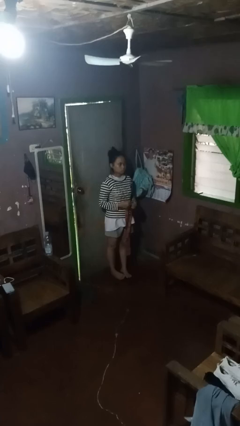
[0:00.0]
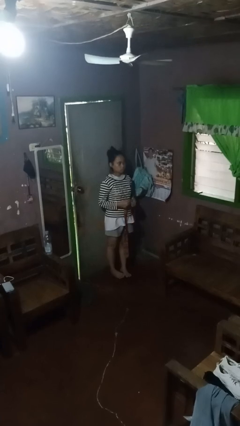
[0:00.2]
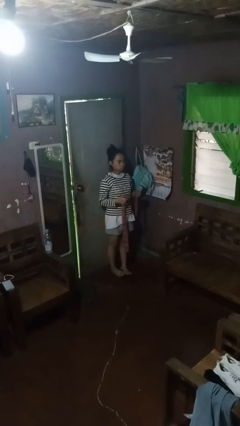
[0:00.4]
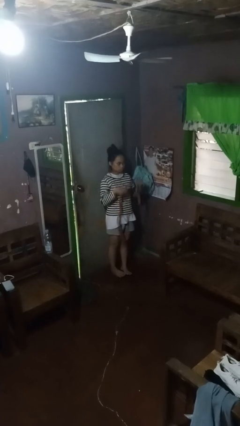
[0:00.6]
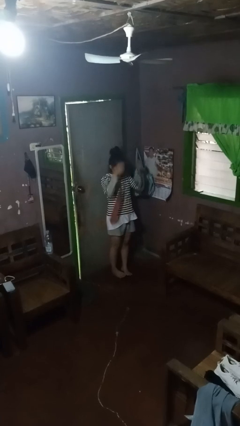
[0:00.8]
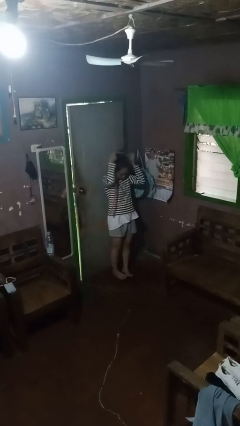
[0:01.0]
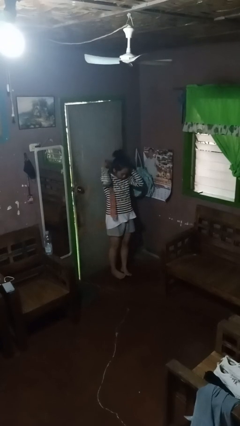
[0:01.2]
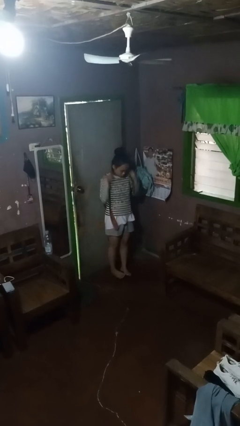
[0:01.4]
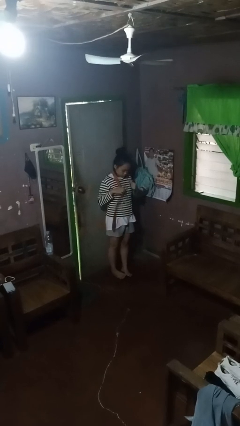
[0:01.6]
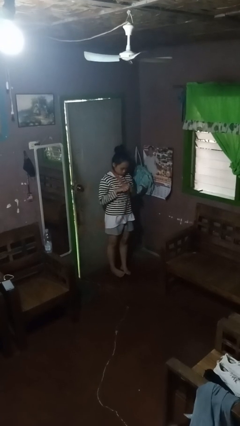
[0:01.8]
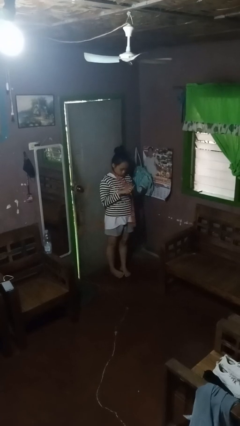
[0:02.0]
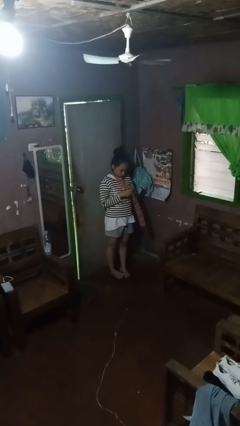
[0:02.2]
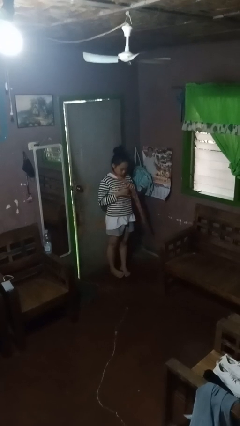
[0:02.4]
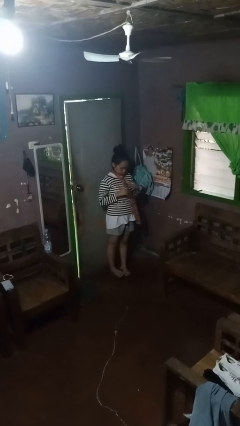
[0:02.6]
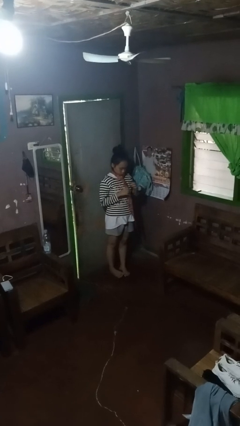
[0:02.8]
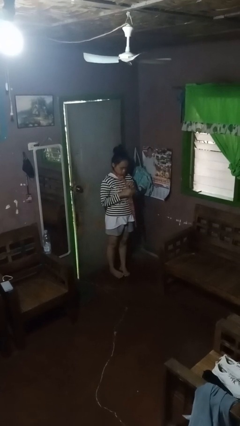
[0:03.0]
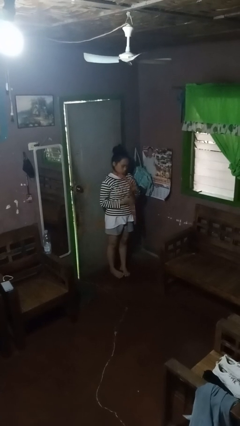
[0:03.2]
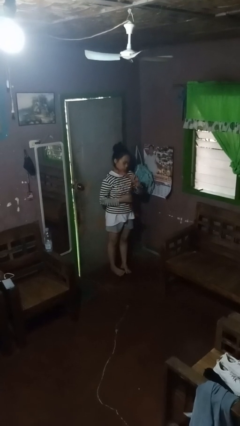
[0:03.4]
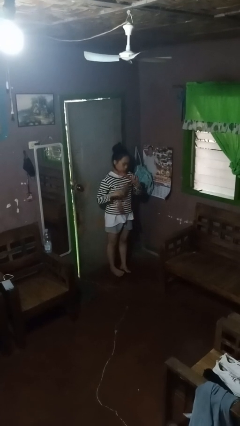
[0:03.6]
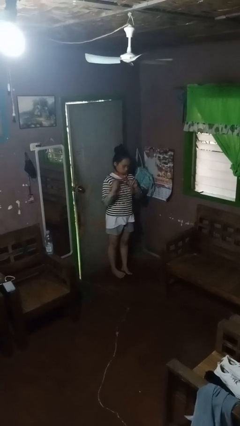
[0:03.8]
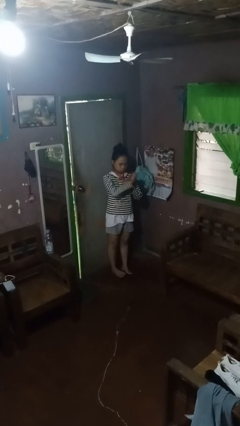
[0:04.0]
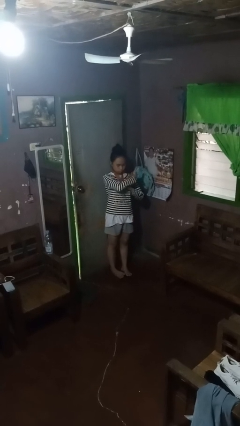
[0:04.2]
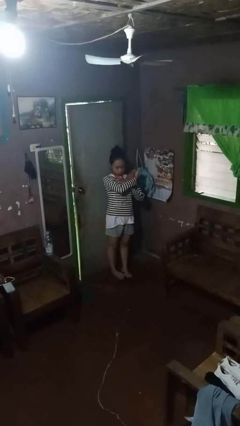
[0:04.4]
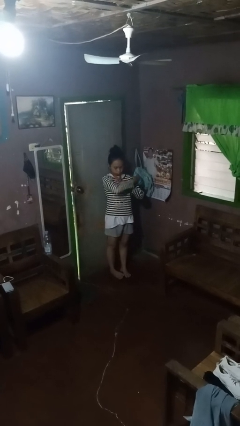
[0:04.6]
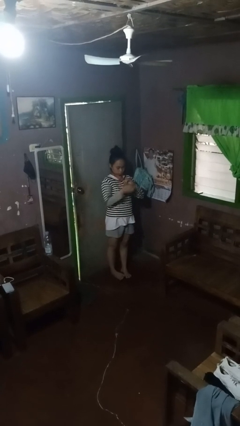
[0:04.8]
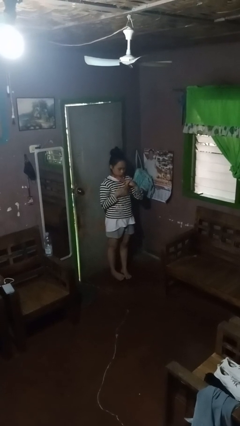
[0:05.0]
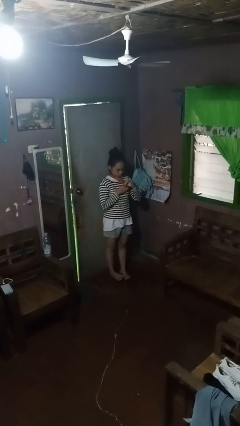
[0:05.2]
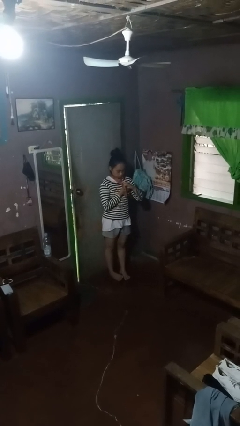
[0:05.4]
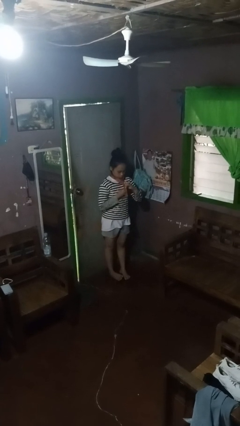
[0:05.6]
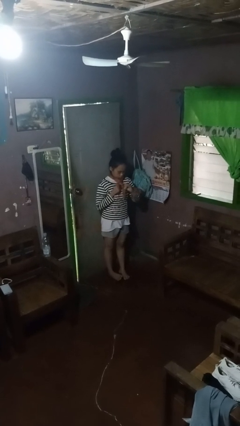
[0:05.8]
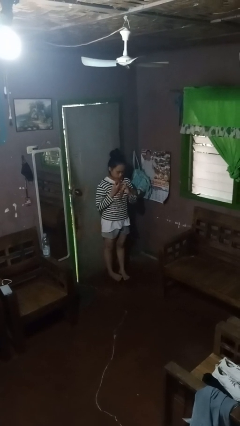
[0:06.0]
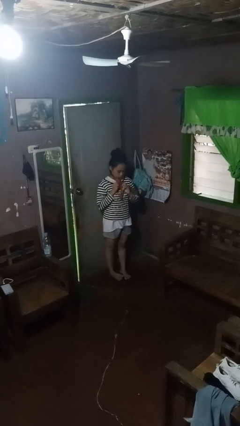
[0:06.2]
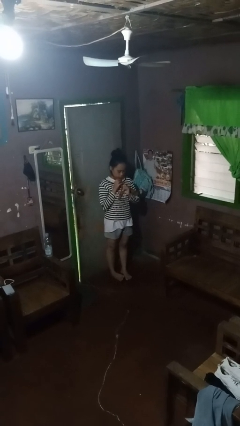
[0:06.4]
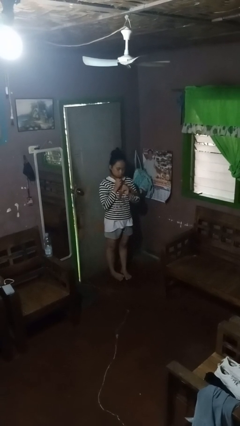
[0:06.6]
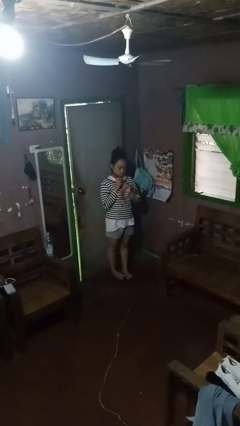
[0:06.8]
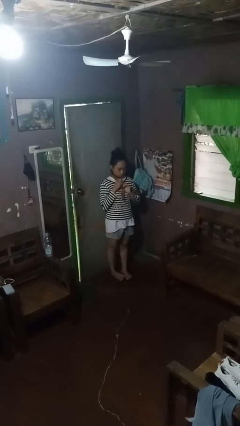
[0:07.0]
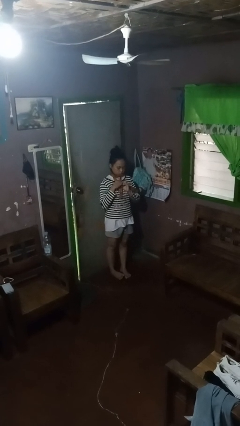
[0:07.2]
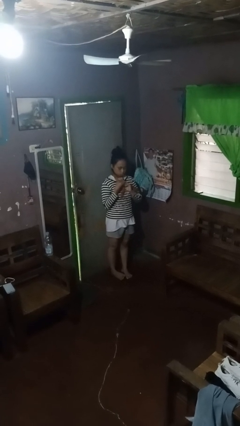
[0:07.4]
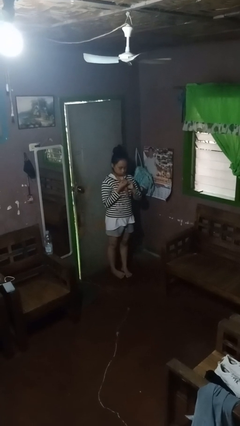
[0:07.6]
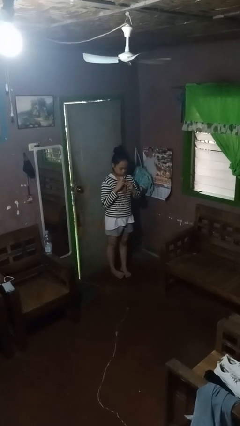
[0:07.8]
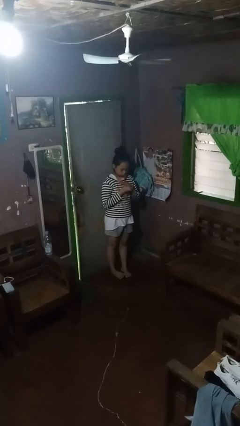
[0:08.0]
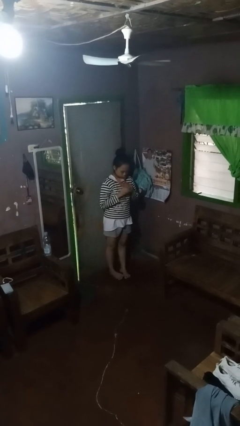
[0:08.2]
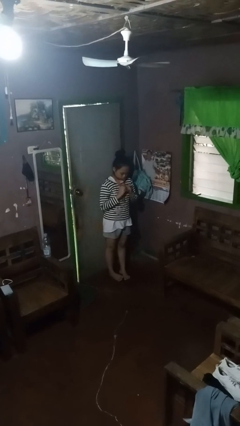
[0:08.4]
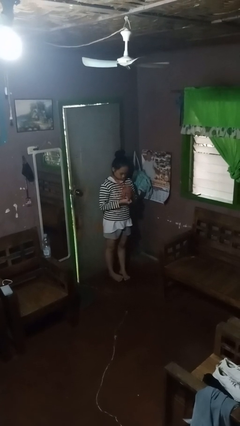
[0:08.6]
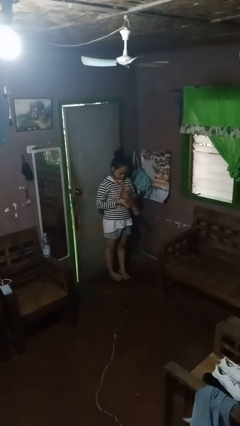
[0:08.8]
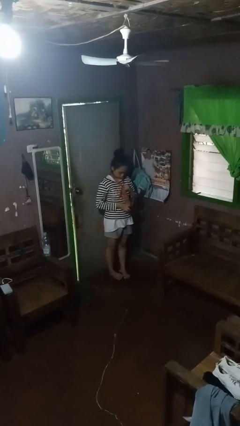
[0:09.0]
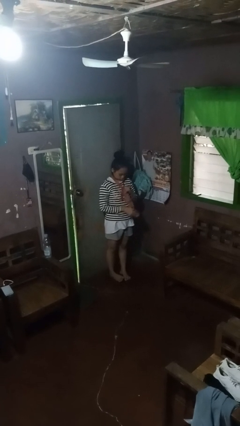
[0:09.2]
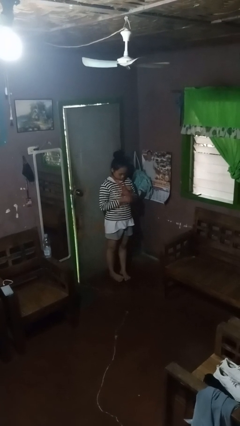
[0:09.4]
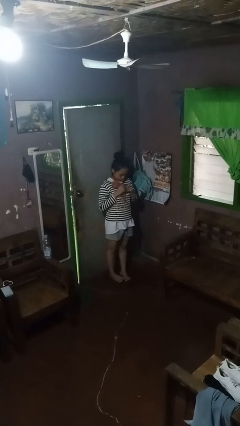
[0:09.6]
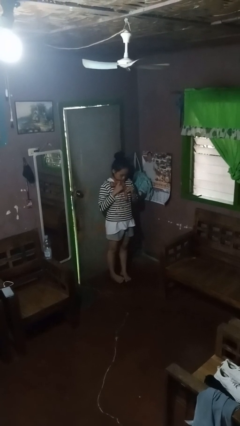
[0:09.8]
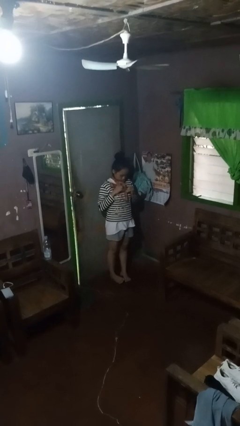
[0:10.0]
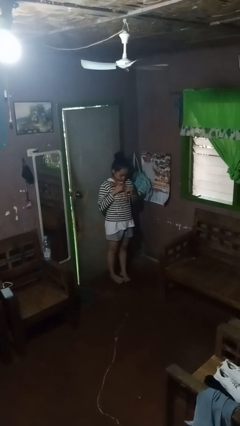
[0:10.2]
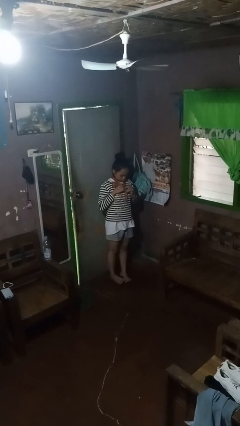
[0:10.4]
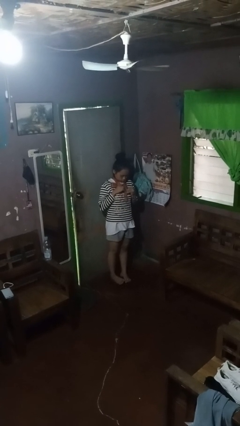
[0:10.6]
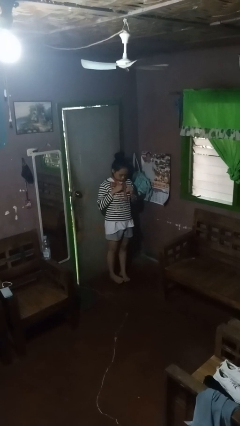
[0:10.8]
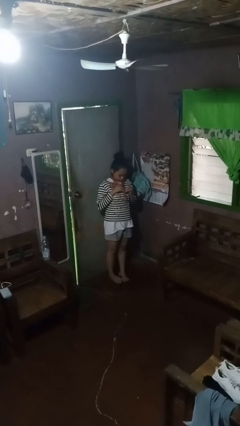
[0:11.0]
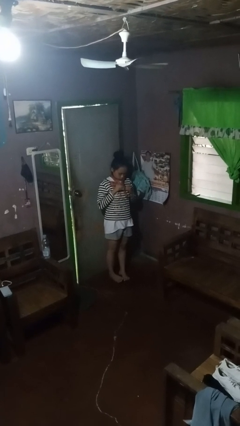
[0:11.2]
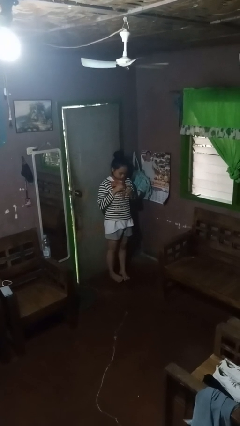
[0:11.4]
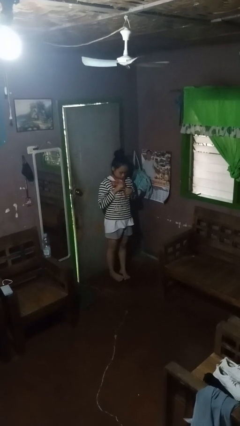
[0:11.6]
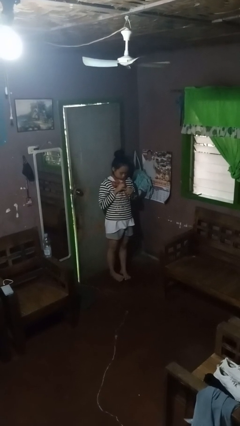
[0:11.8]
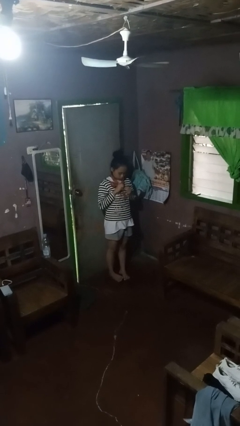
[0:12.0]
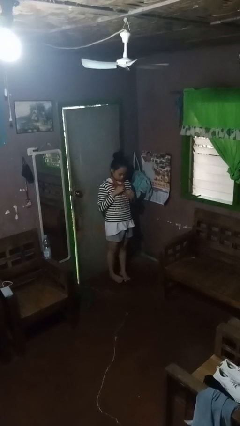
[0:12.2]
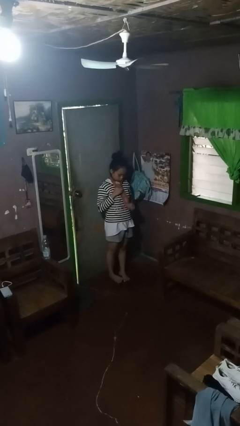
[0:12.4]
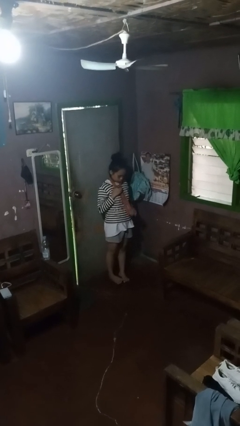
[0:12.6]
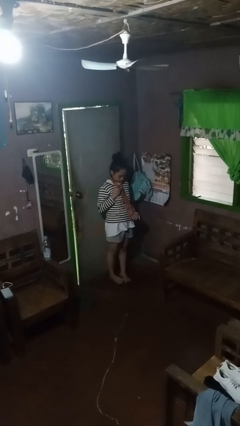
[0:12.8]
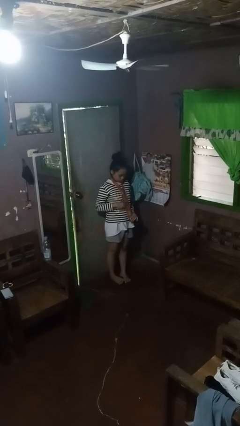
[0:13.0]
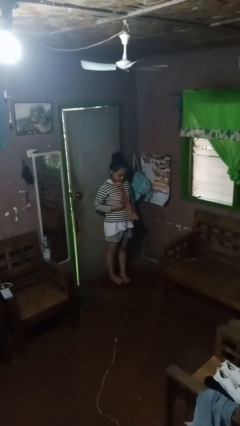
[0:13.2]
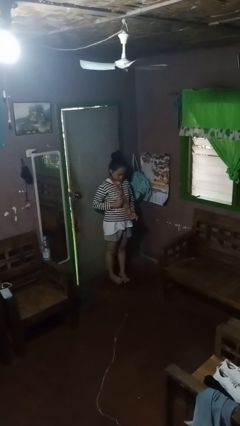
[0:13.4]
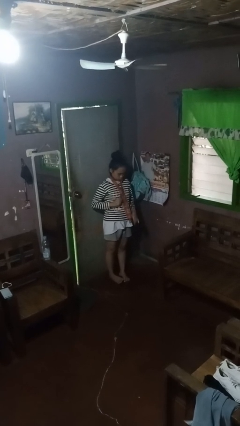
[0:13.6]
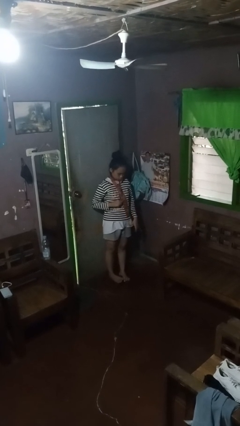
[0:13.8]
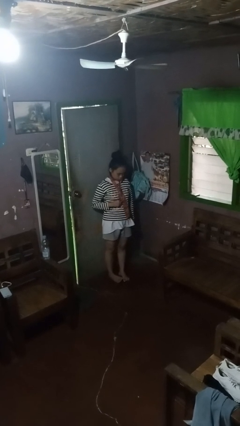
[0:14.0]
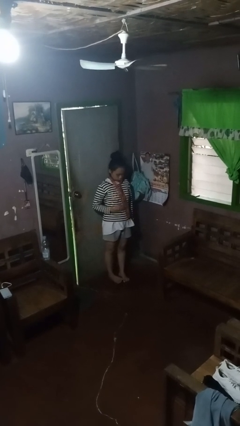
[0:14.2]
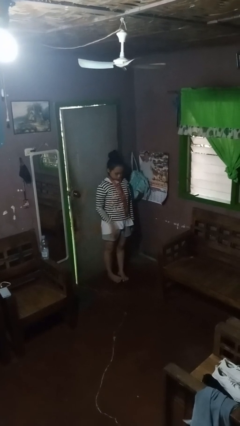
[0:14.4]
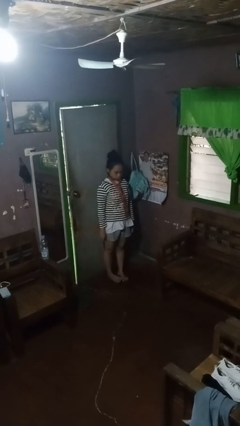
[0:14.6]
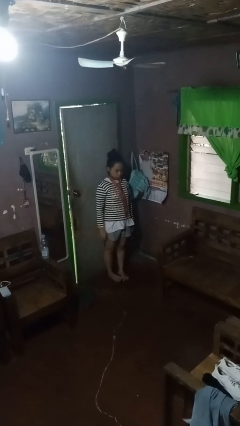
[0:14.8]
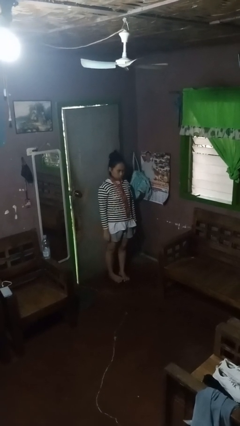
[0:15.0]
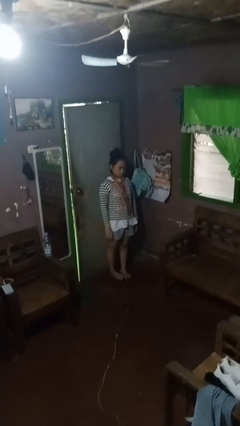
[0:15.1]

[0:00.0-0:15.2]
person puts on necktie

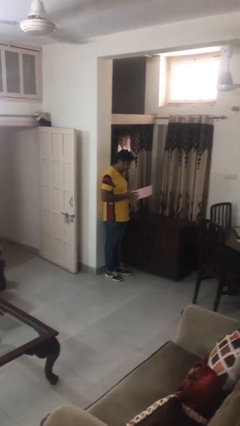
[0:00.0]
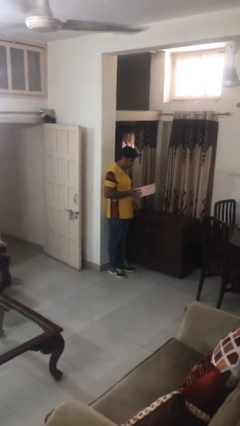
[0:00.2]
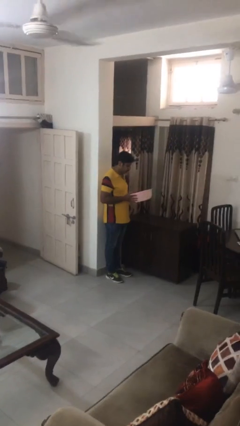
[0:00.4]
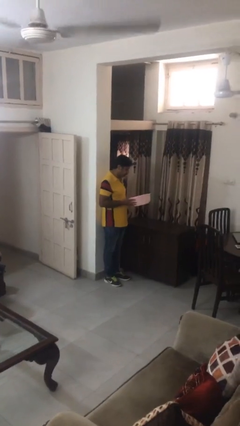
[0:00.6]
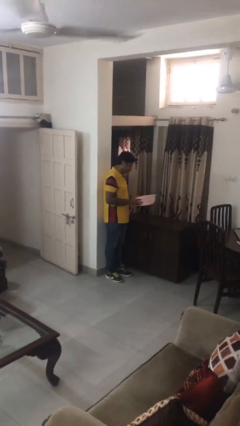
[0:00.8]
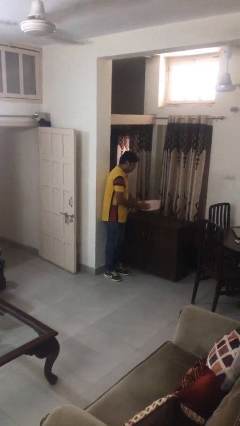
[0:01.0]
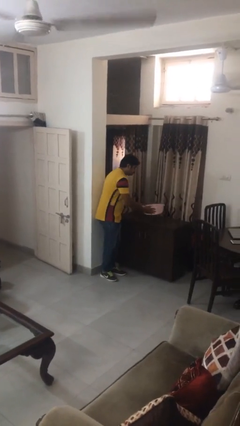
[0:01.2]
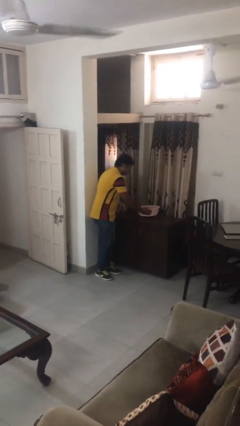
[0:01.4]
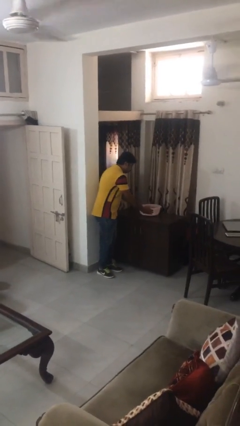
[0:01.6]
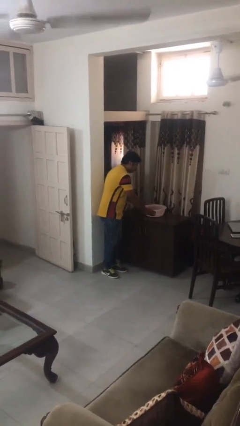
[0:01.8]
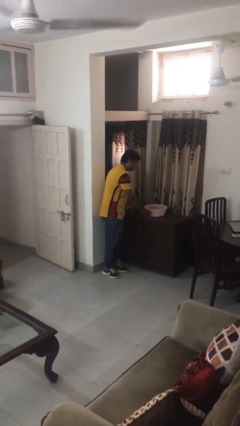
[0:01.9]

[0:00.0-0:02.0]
person puts down object on countertop

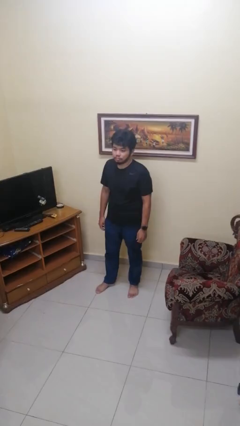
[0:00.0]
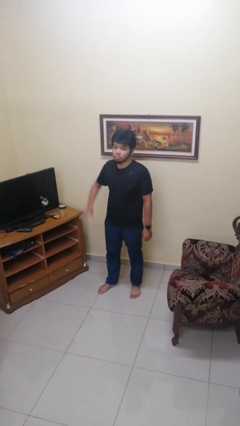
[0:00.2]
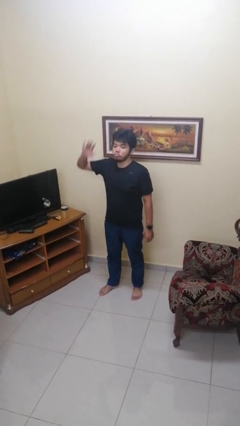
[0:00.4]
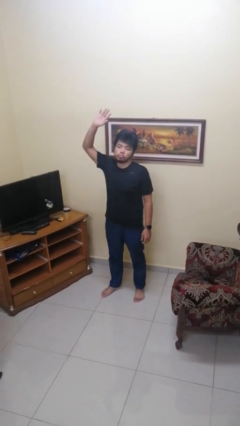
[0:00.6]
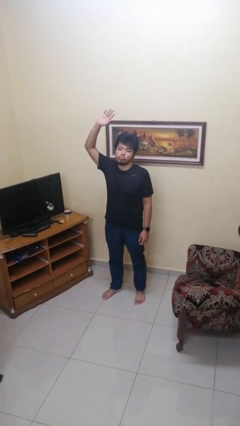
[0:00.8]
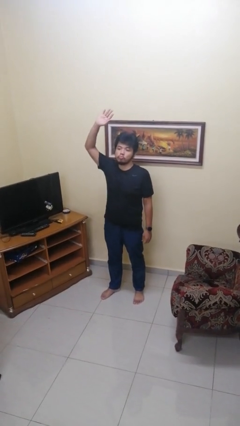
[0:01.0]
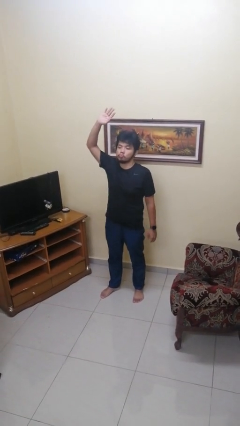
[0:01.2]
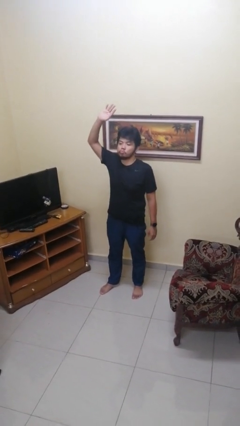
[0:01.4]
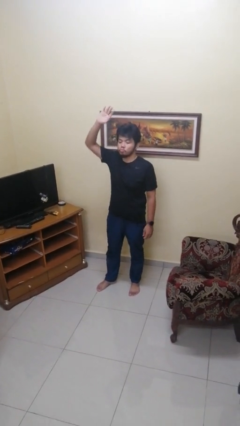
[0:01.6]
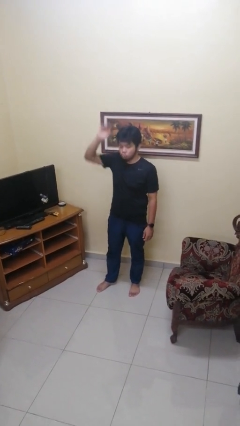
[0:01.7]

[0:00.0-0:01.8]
person gestures raise hand
